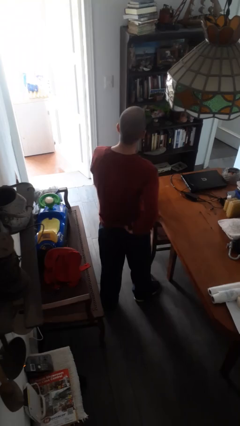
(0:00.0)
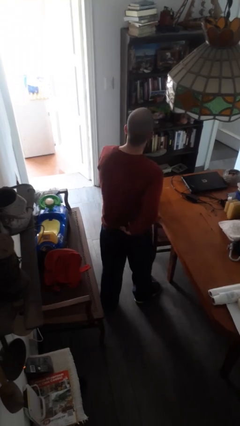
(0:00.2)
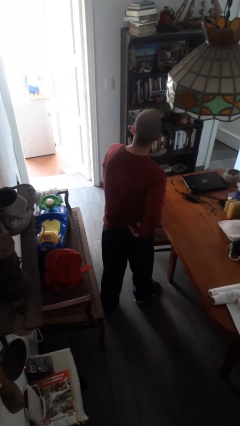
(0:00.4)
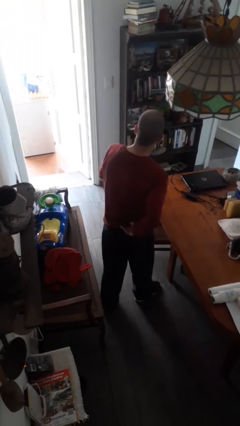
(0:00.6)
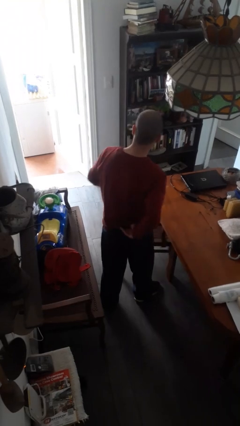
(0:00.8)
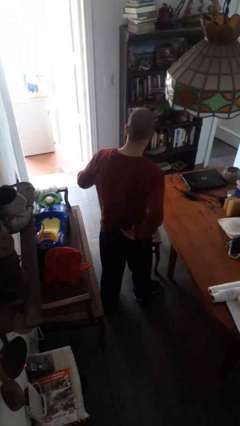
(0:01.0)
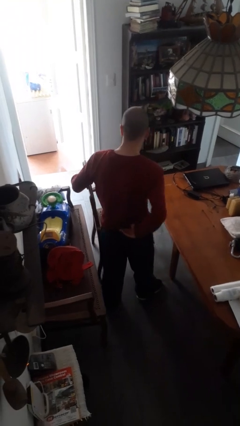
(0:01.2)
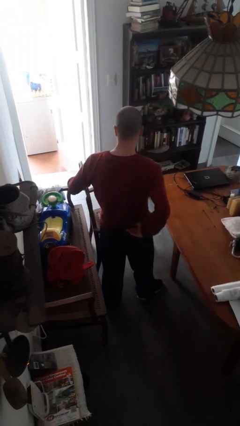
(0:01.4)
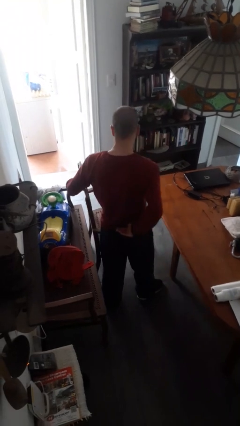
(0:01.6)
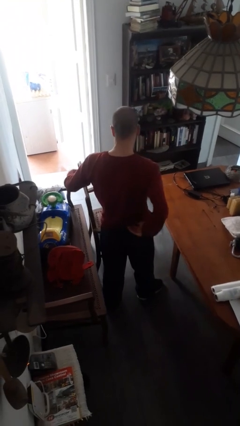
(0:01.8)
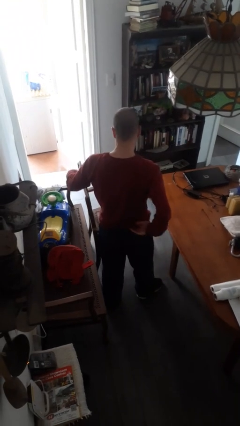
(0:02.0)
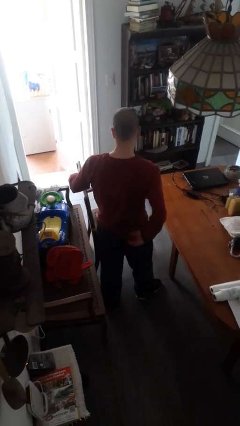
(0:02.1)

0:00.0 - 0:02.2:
person pulls out chair

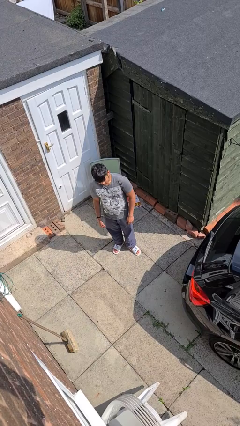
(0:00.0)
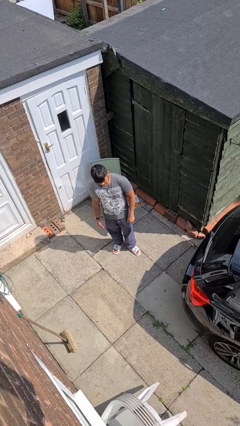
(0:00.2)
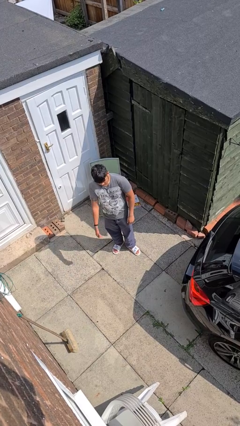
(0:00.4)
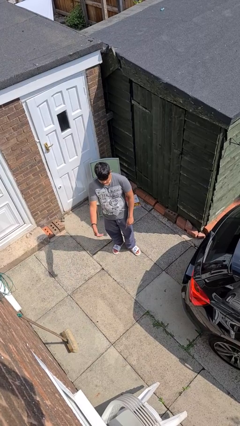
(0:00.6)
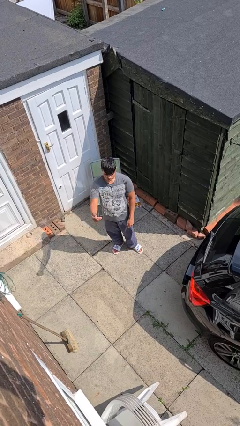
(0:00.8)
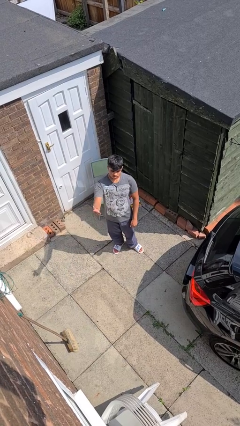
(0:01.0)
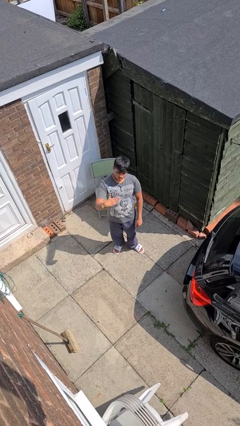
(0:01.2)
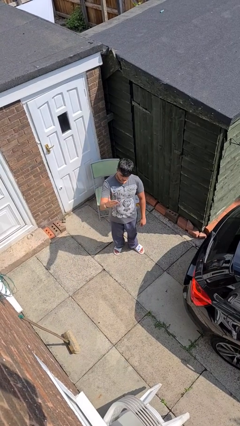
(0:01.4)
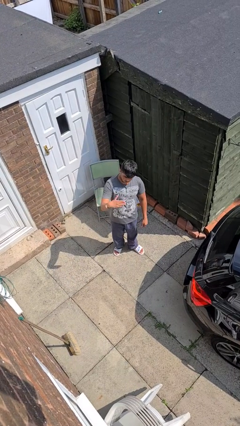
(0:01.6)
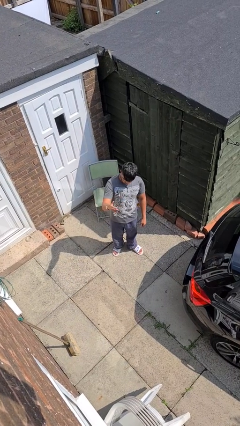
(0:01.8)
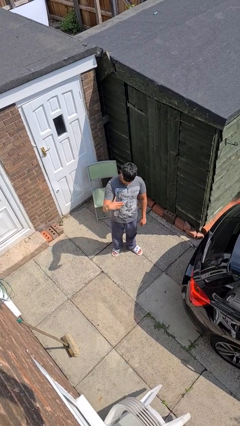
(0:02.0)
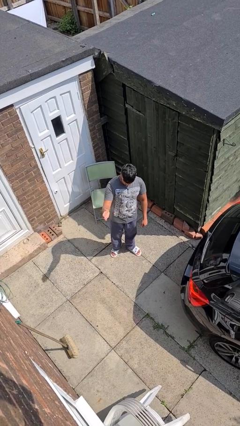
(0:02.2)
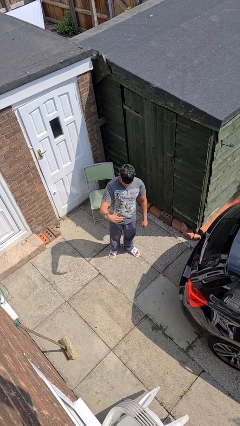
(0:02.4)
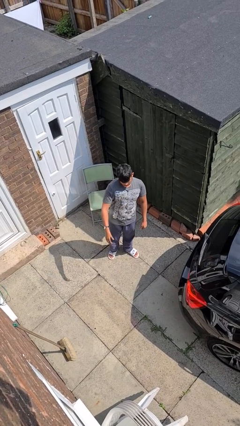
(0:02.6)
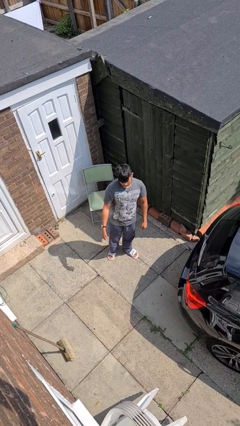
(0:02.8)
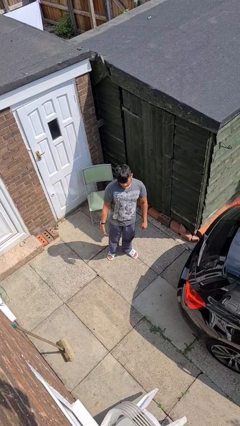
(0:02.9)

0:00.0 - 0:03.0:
person gestures come here

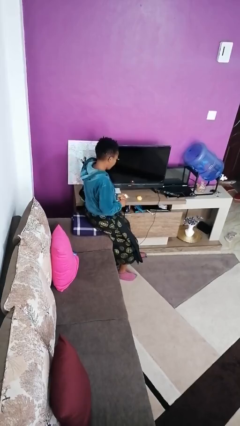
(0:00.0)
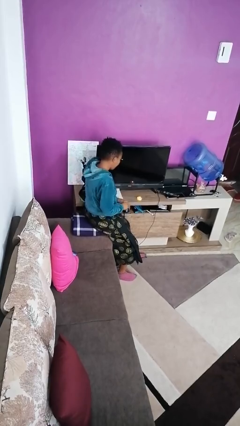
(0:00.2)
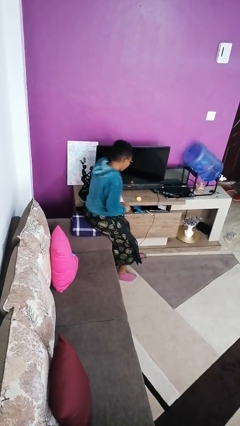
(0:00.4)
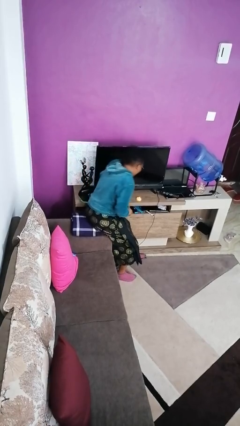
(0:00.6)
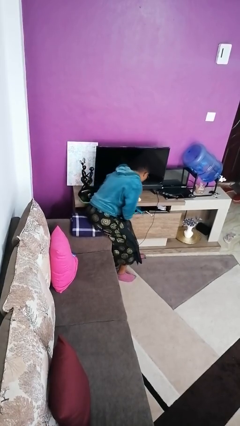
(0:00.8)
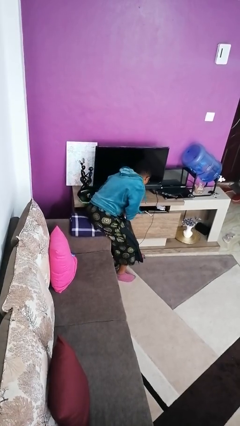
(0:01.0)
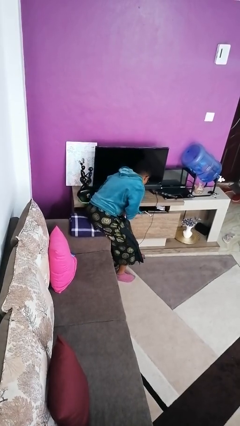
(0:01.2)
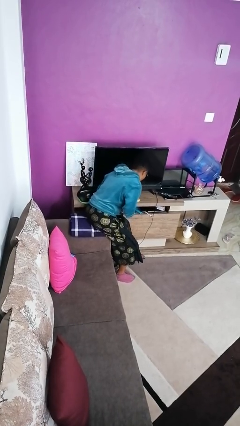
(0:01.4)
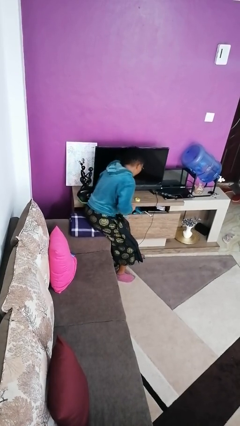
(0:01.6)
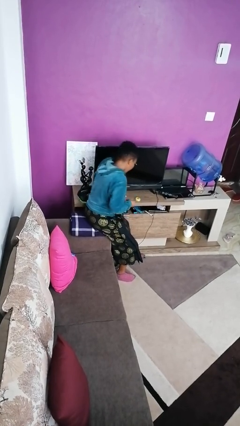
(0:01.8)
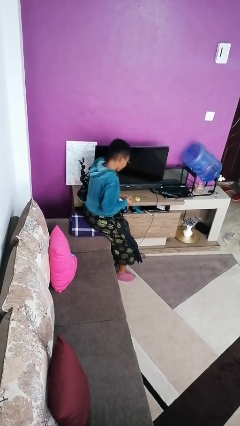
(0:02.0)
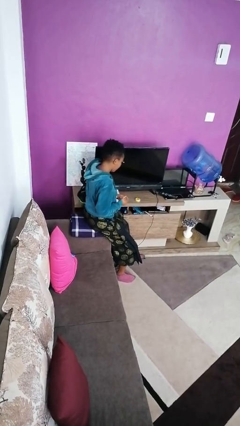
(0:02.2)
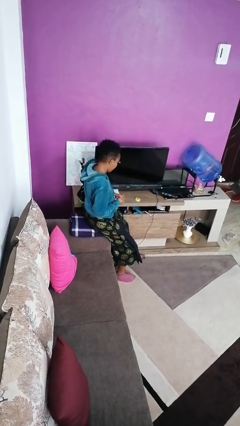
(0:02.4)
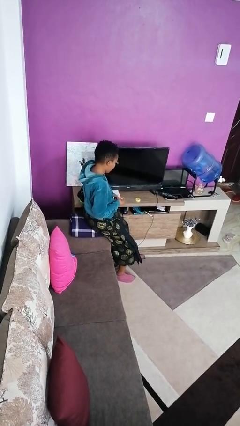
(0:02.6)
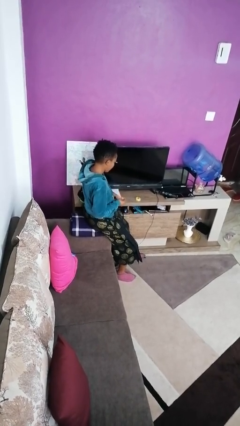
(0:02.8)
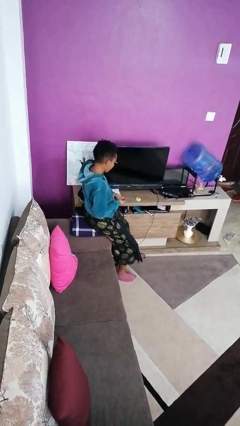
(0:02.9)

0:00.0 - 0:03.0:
person extinguishes candle

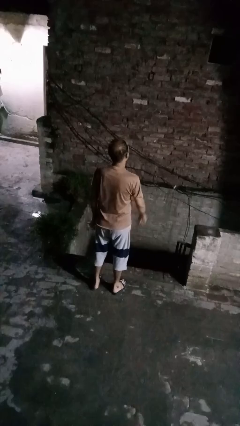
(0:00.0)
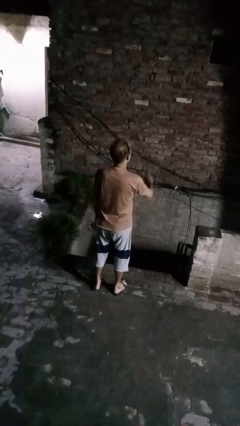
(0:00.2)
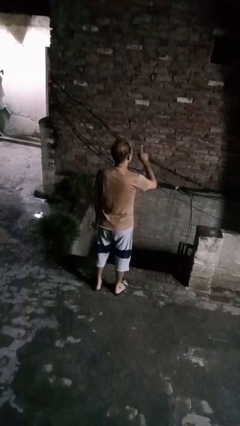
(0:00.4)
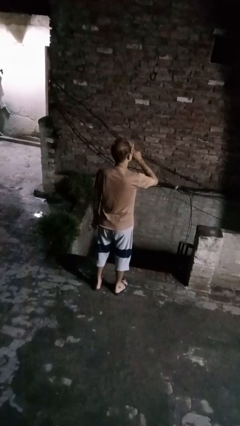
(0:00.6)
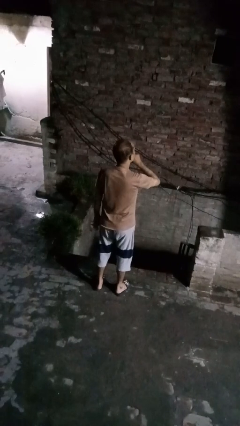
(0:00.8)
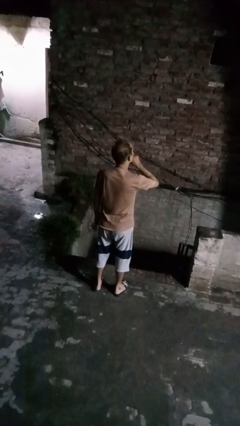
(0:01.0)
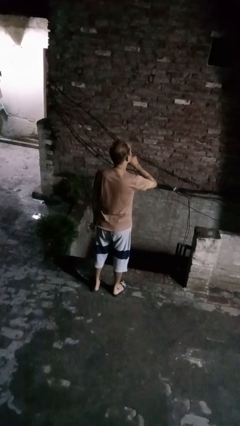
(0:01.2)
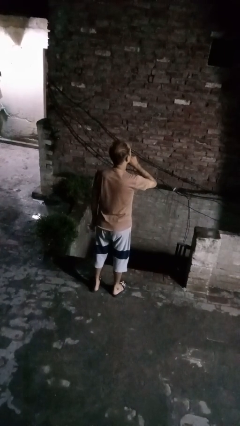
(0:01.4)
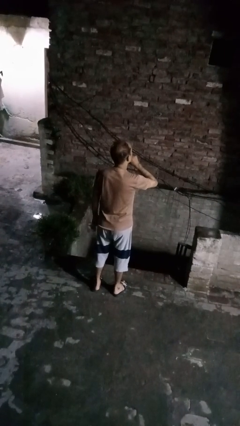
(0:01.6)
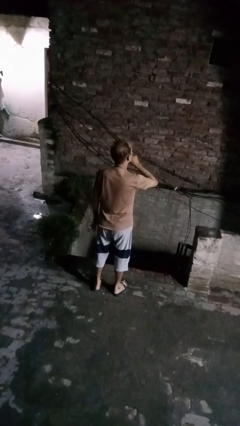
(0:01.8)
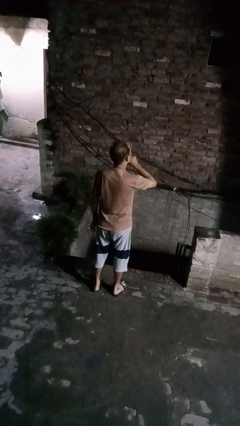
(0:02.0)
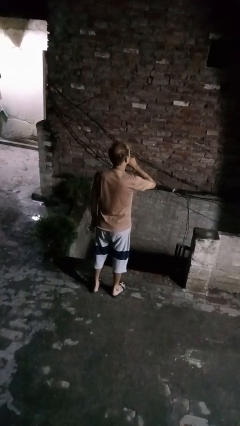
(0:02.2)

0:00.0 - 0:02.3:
person gestures be quiet

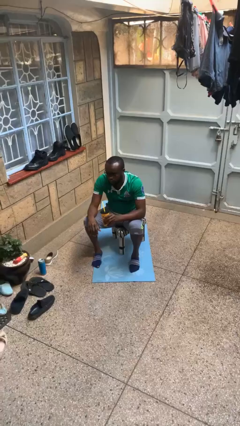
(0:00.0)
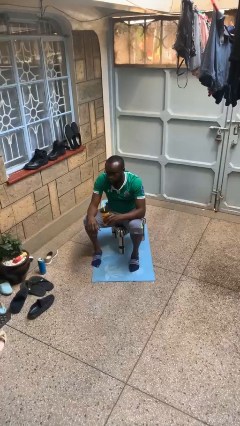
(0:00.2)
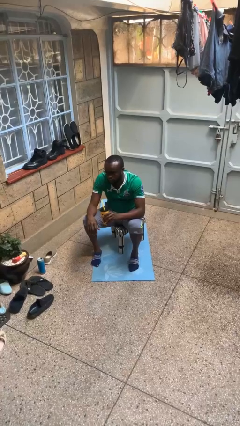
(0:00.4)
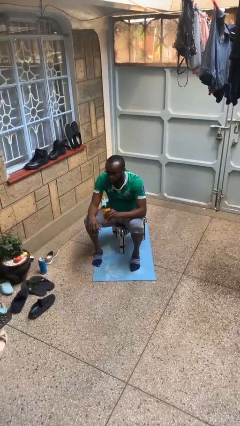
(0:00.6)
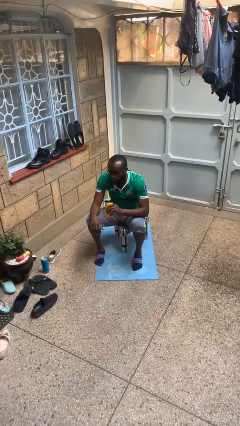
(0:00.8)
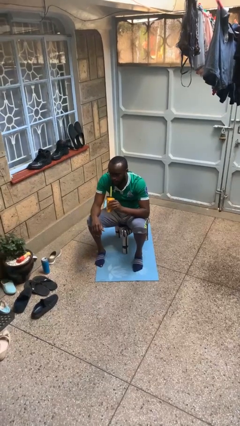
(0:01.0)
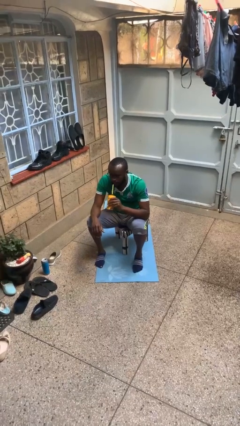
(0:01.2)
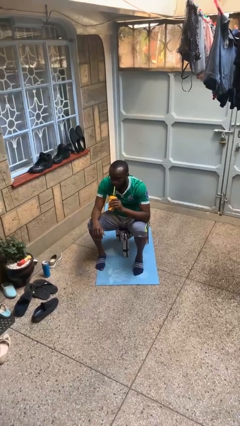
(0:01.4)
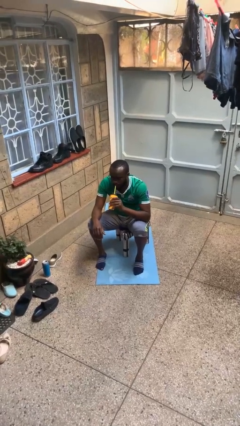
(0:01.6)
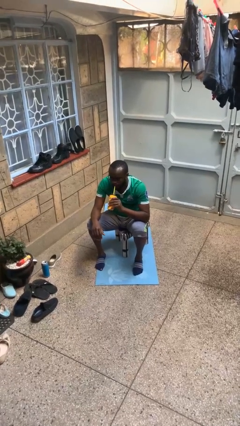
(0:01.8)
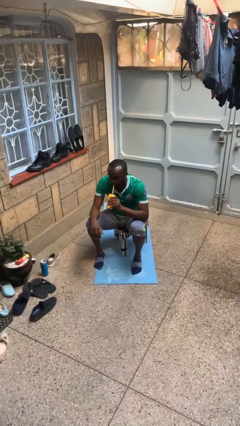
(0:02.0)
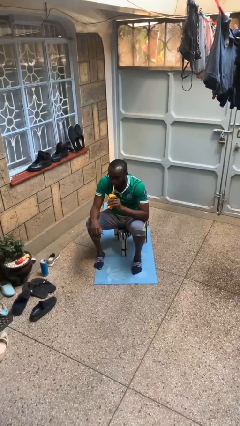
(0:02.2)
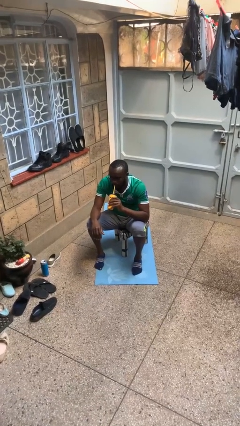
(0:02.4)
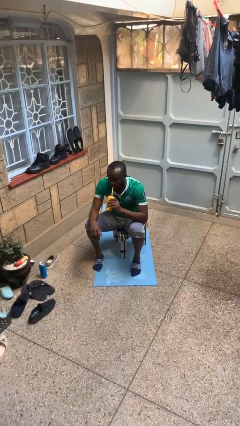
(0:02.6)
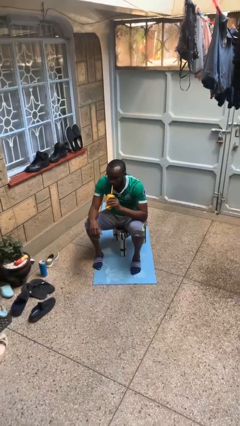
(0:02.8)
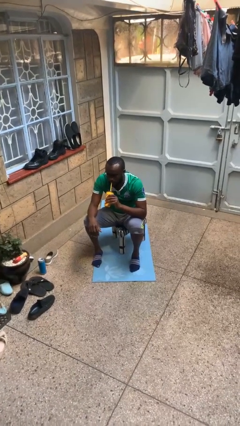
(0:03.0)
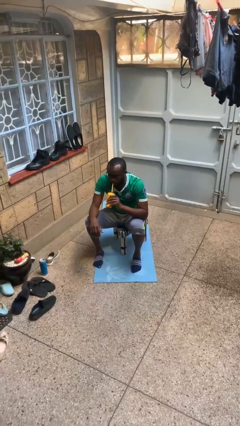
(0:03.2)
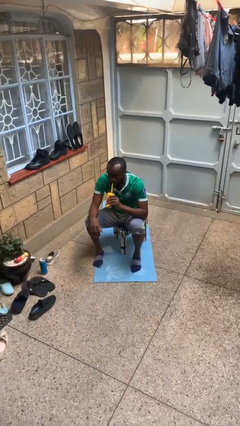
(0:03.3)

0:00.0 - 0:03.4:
person drinks from straw

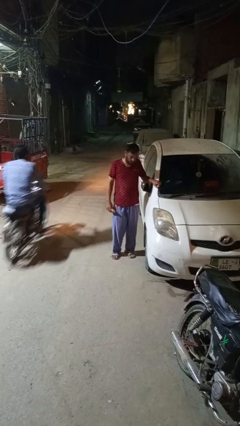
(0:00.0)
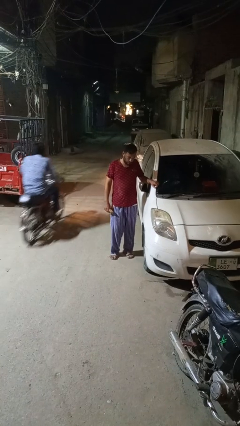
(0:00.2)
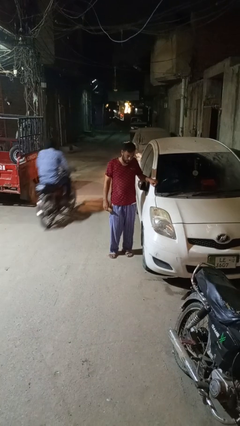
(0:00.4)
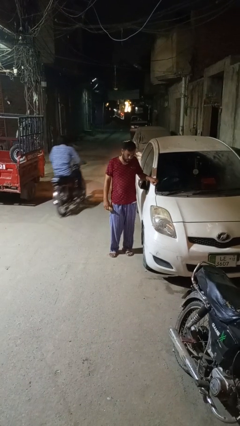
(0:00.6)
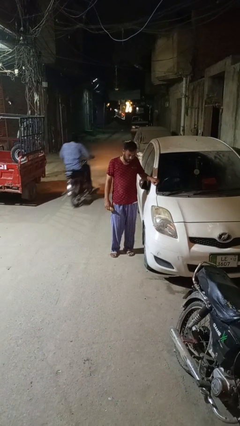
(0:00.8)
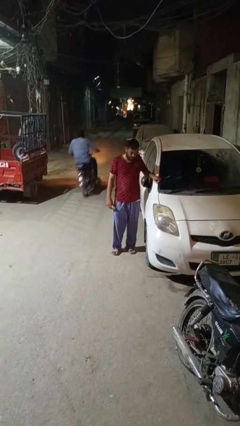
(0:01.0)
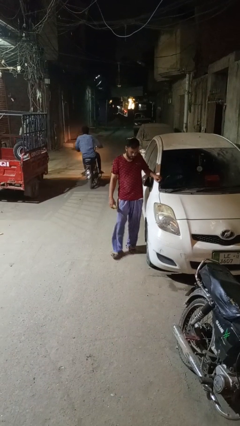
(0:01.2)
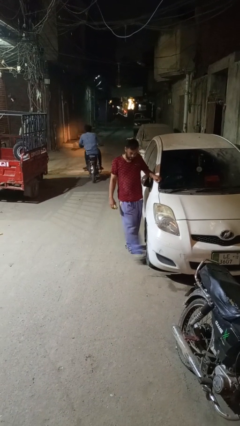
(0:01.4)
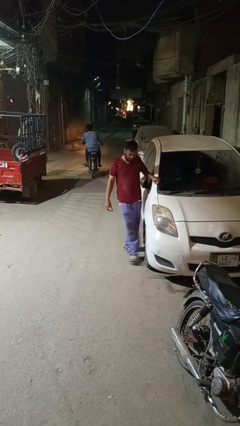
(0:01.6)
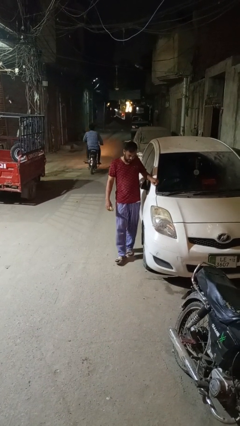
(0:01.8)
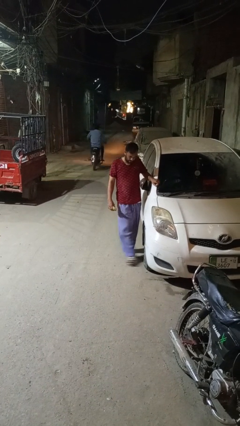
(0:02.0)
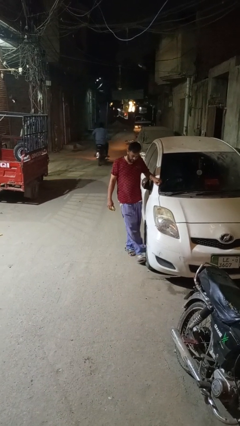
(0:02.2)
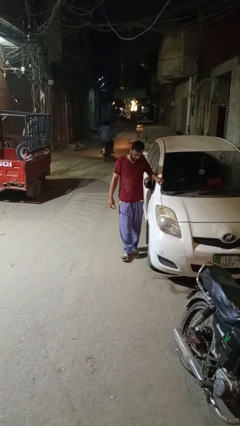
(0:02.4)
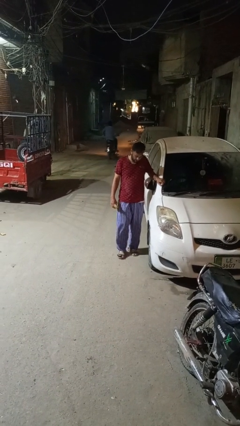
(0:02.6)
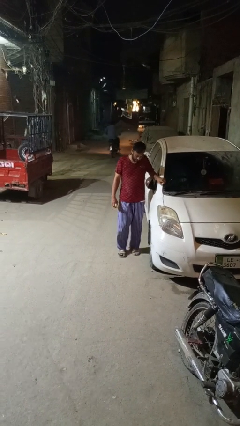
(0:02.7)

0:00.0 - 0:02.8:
person kicks car tires

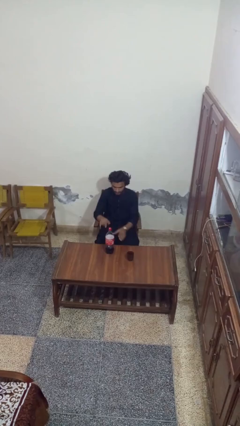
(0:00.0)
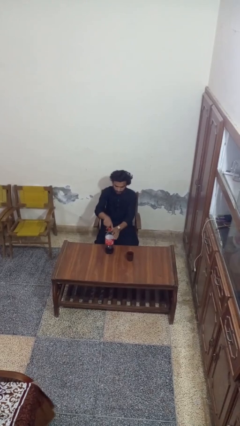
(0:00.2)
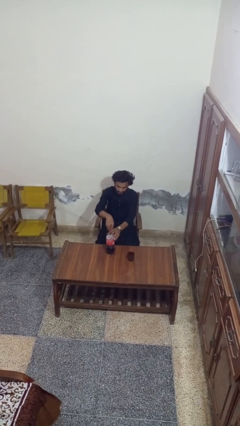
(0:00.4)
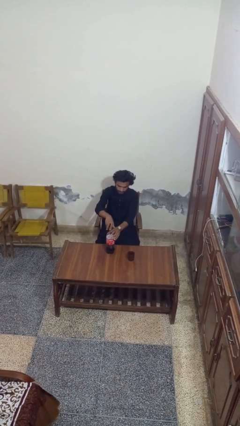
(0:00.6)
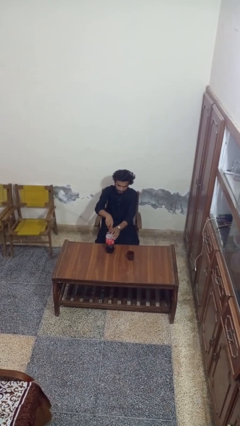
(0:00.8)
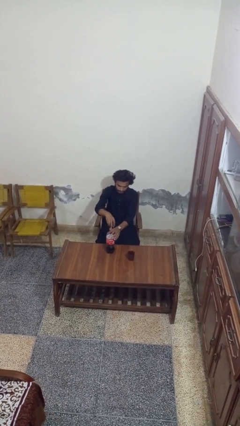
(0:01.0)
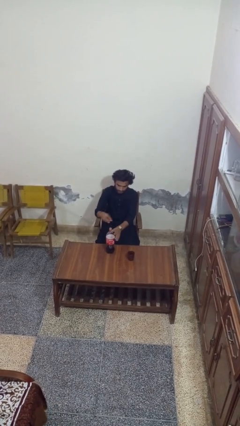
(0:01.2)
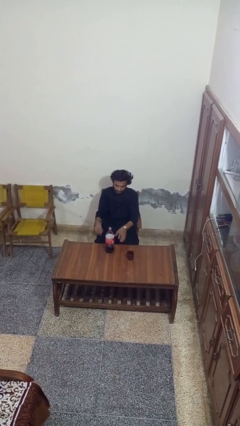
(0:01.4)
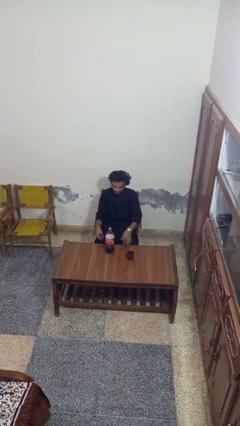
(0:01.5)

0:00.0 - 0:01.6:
person unscrews lid from bottle
